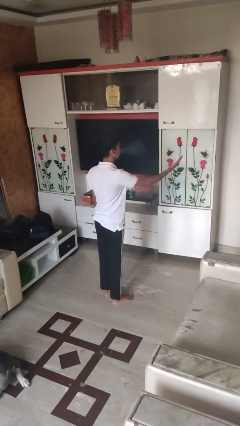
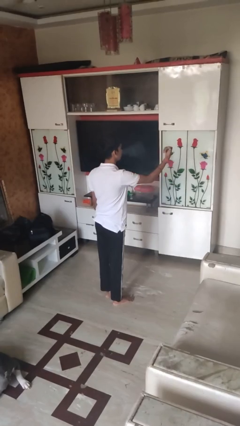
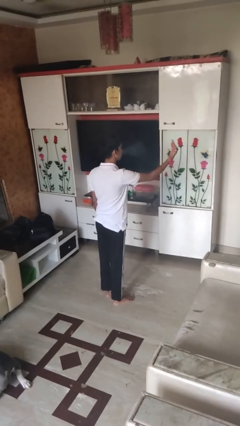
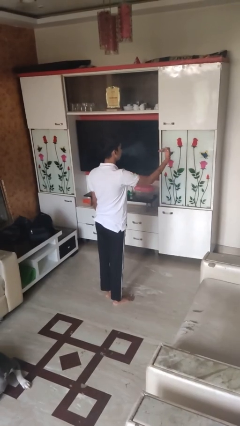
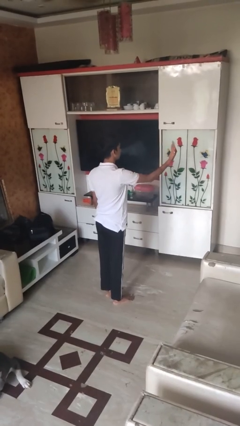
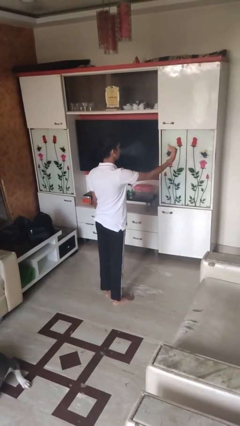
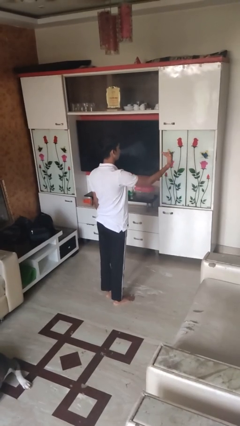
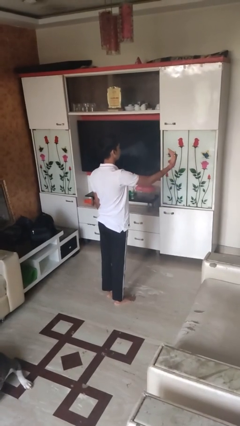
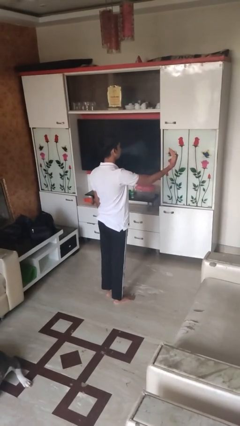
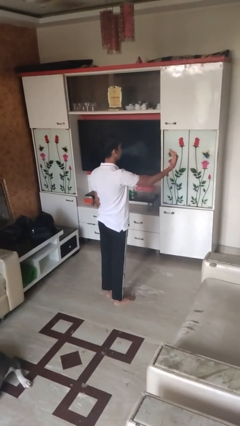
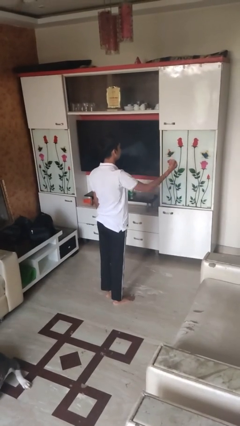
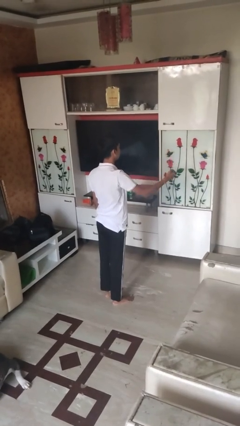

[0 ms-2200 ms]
person gestures come here

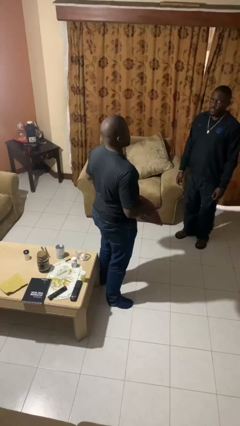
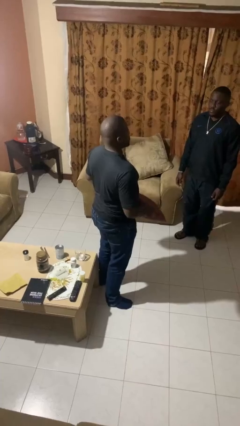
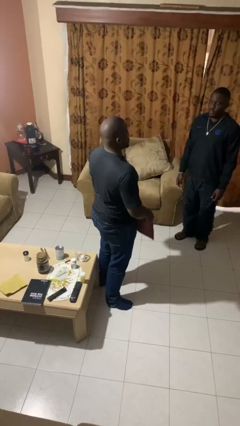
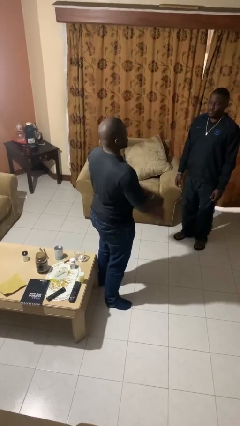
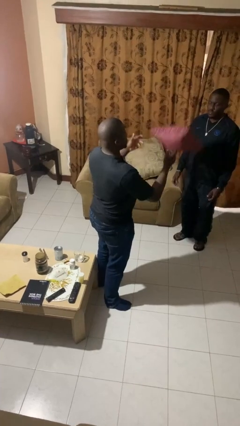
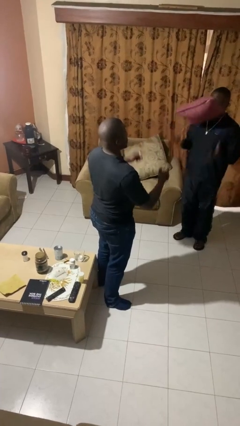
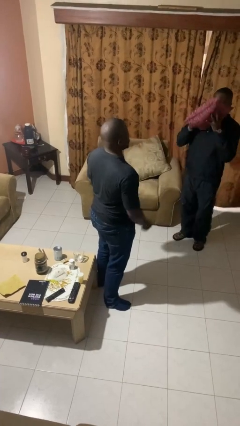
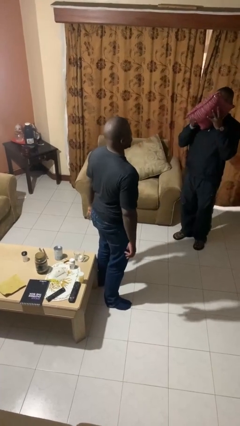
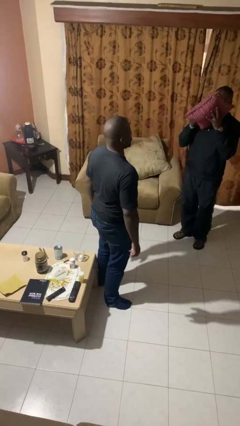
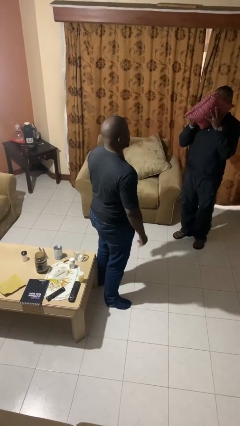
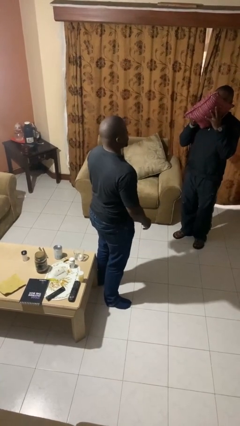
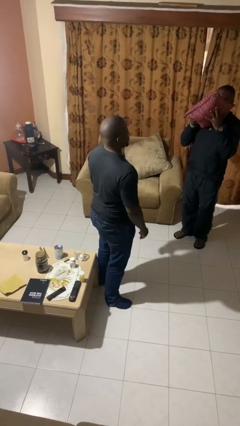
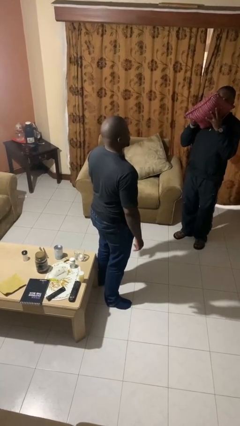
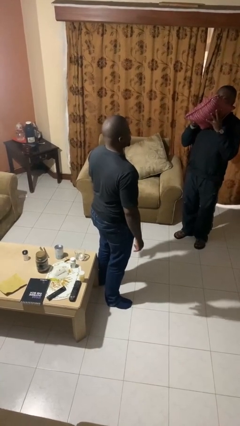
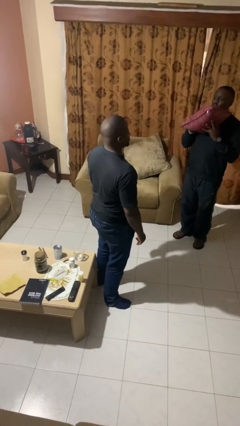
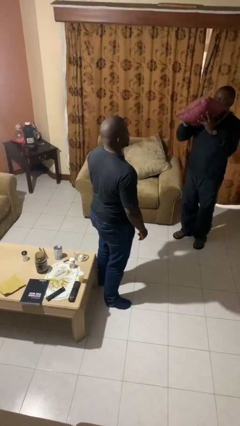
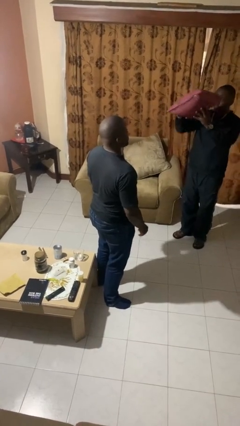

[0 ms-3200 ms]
person throws object to person

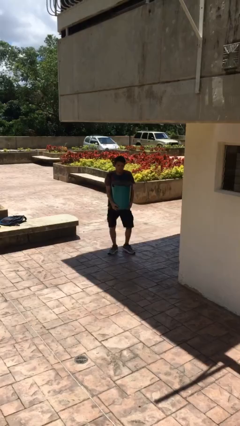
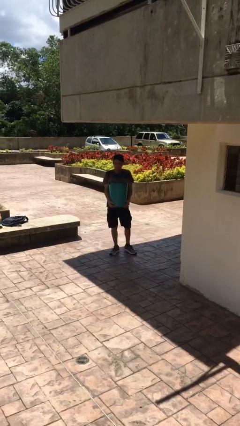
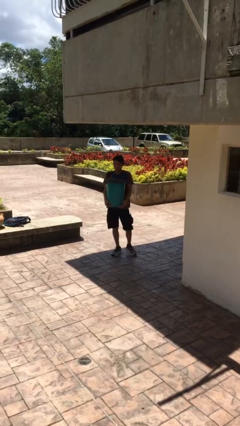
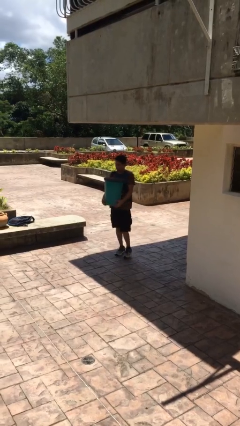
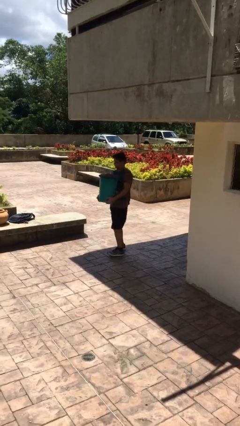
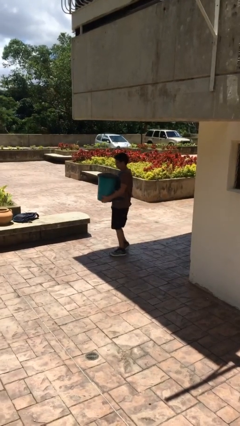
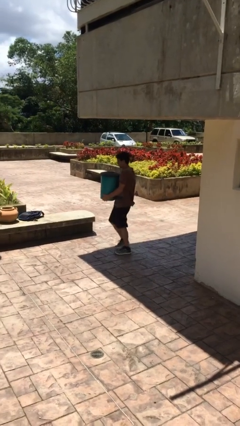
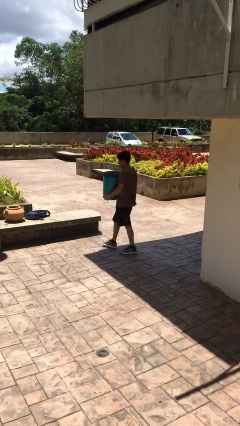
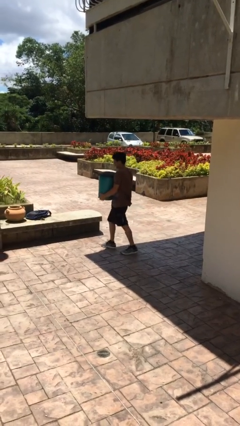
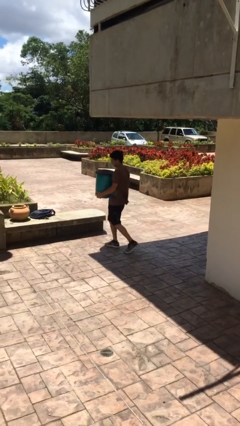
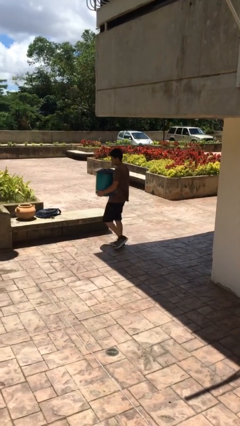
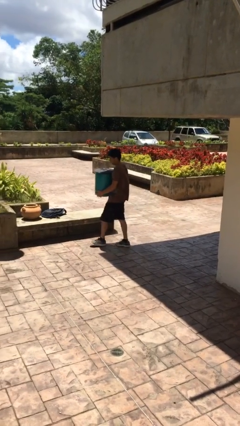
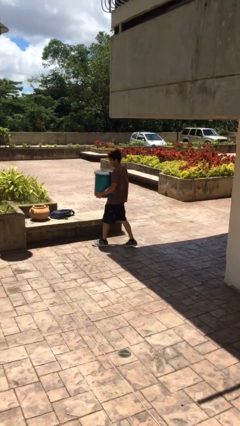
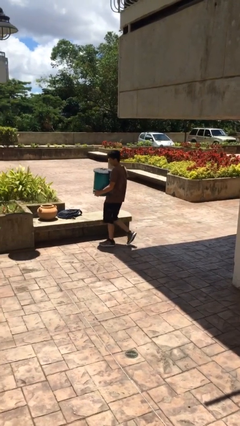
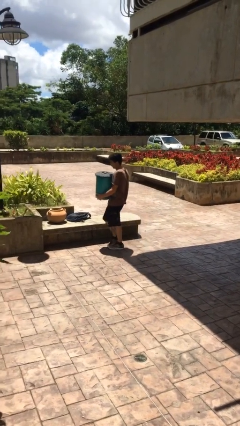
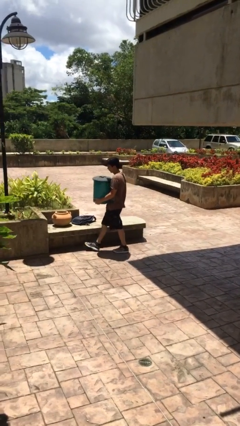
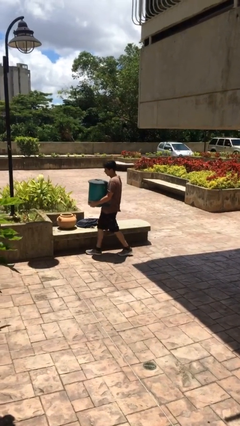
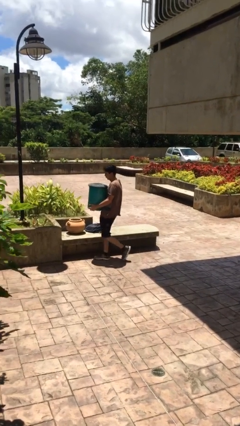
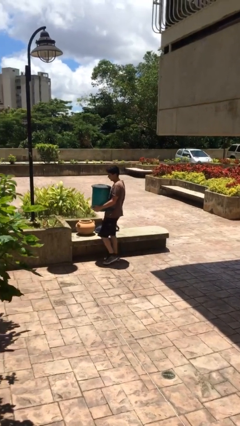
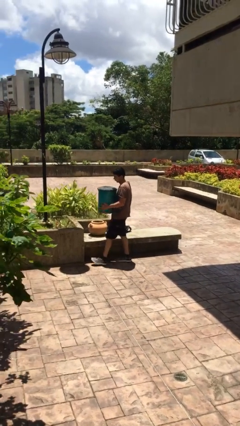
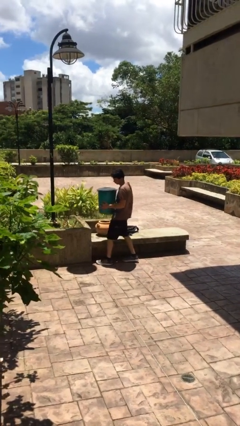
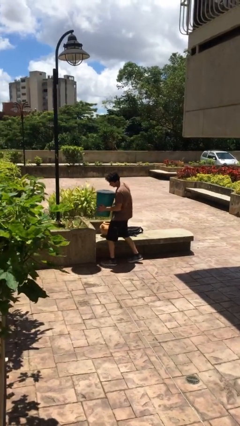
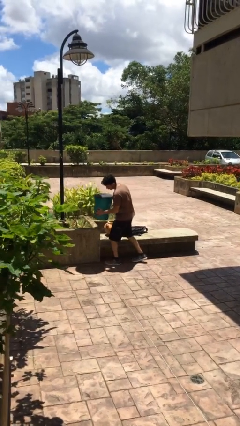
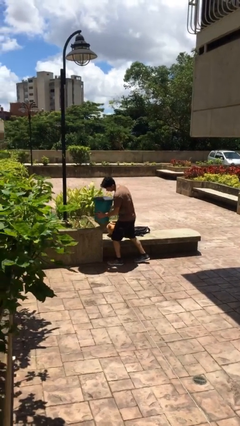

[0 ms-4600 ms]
person carries heavy object

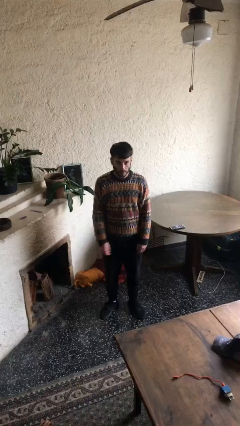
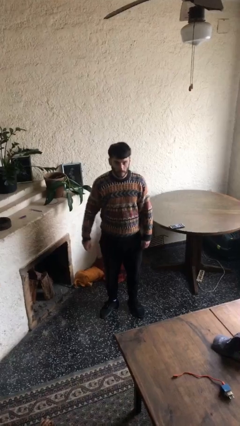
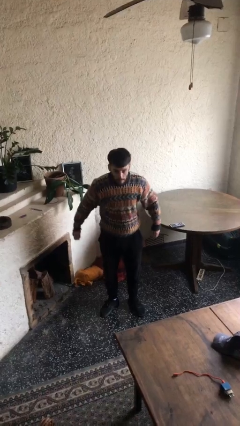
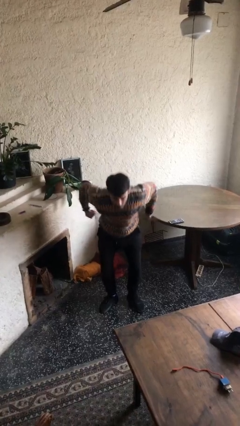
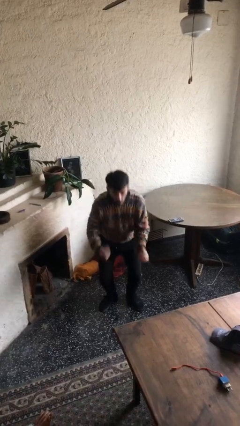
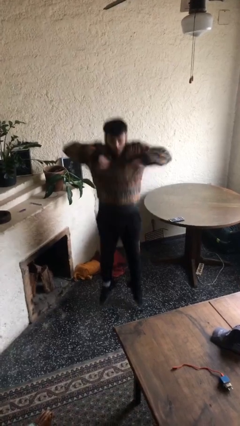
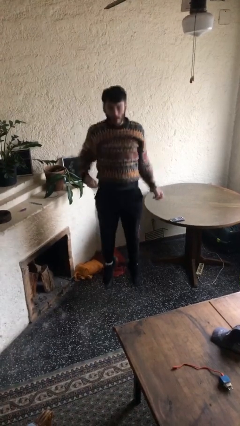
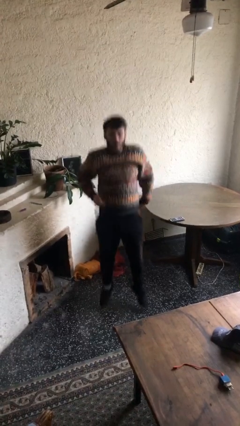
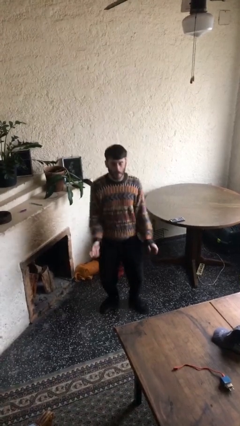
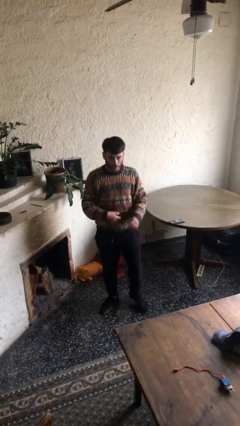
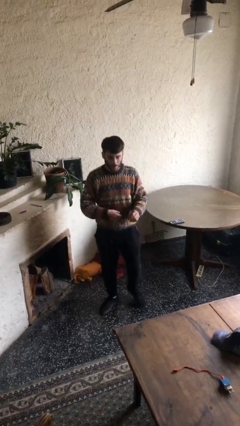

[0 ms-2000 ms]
person jumps

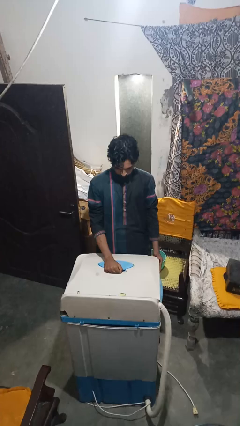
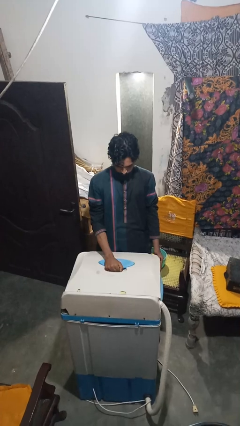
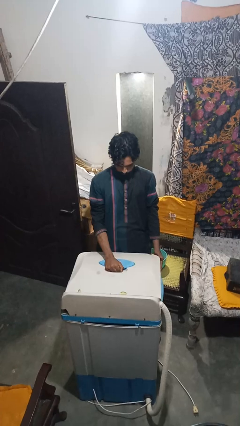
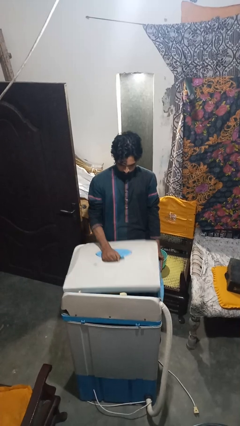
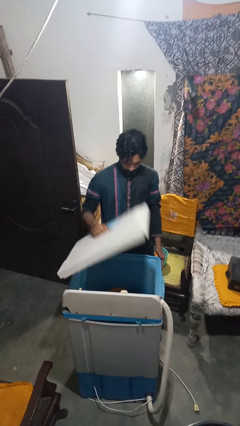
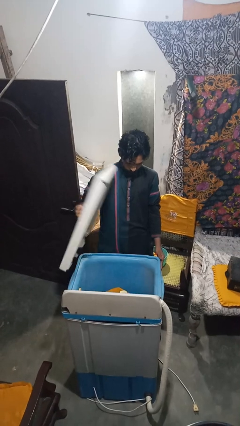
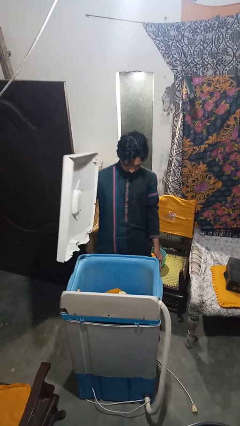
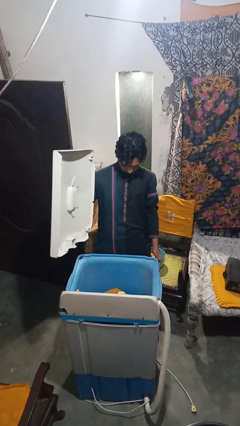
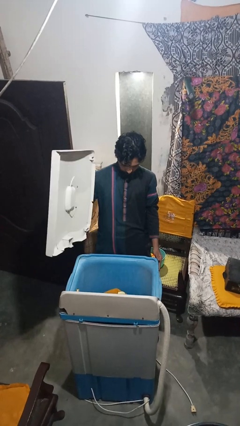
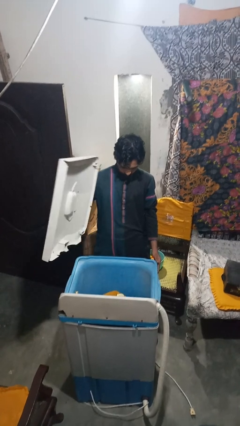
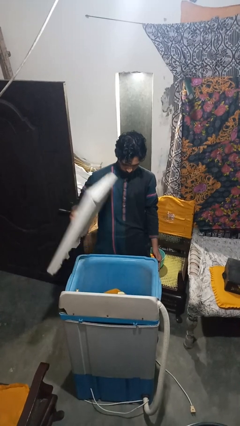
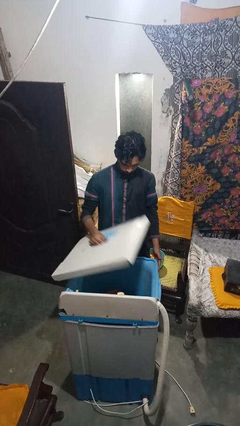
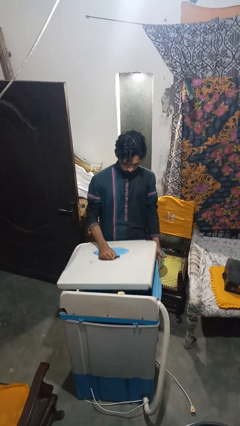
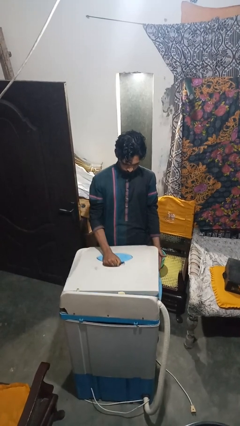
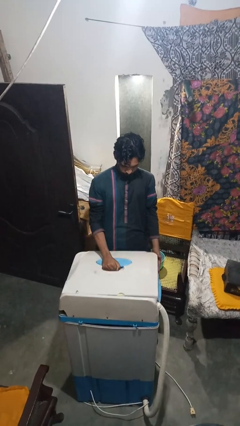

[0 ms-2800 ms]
person opens clothes washer

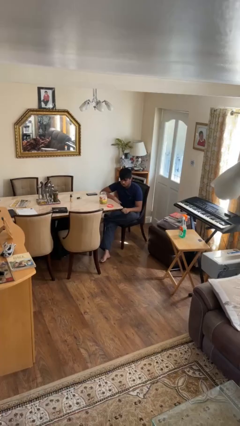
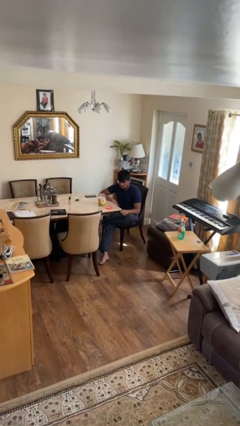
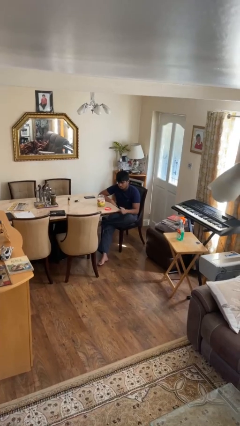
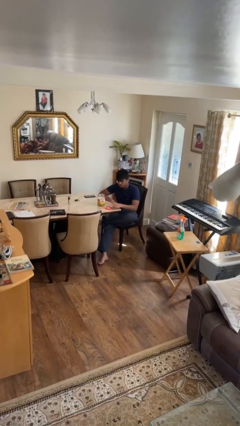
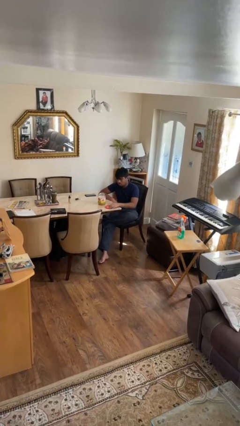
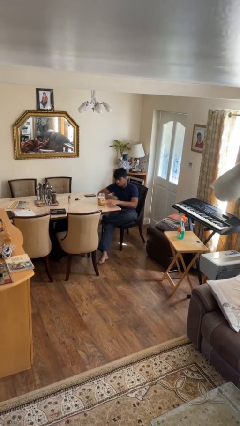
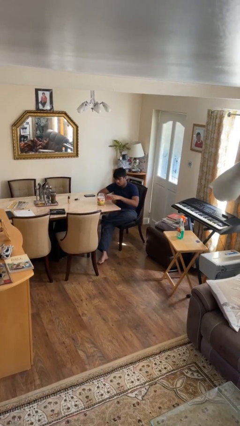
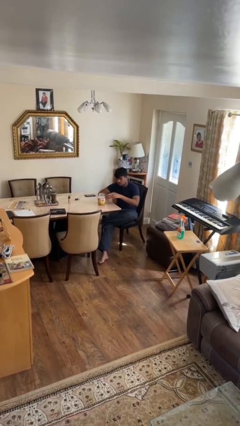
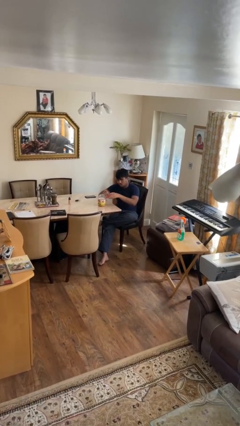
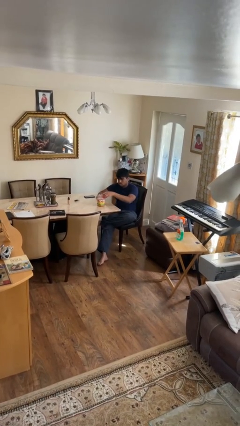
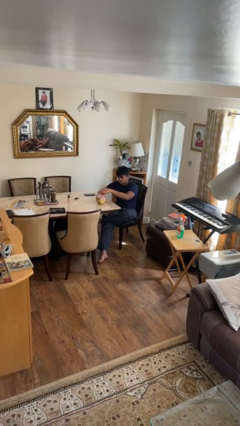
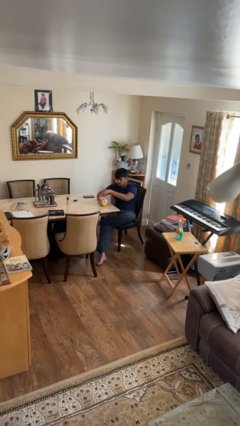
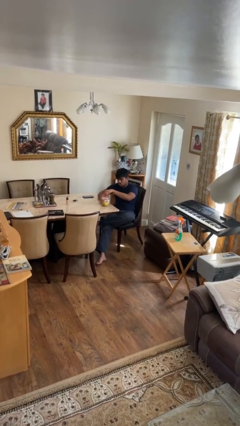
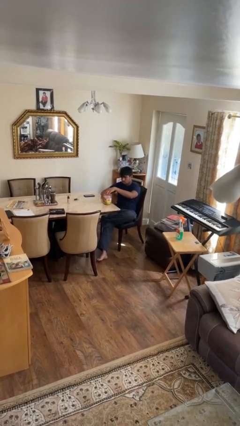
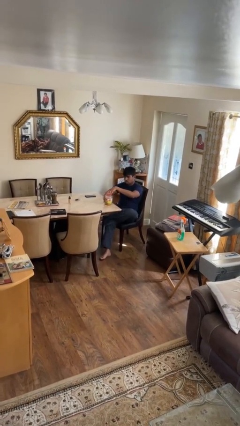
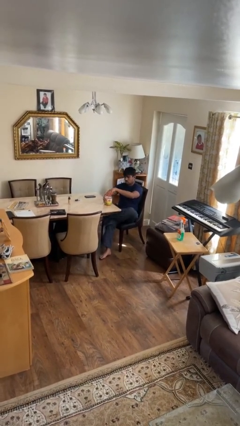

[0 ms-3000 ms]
person closes jar
